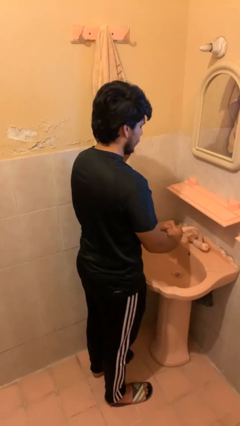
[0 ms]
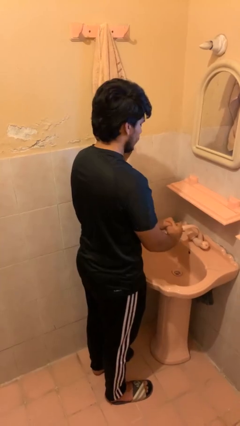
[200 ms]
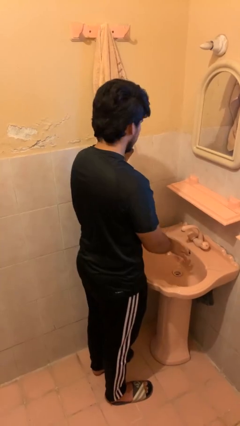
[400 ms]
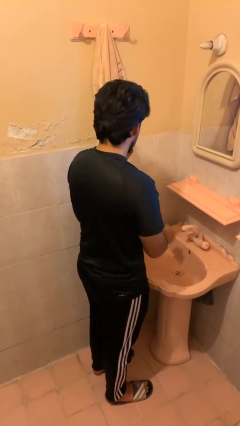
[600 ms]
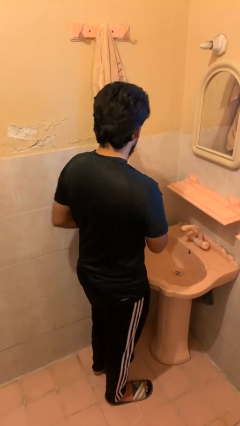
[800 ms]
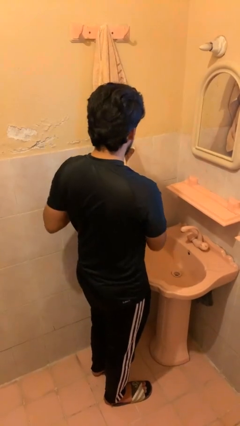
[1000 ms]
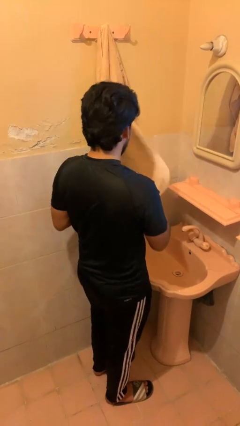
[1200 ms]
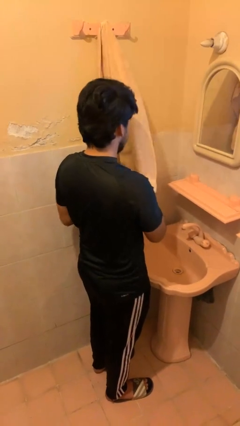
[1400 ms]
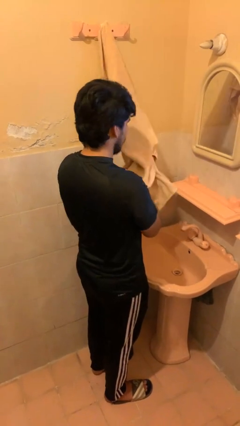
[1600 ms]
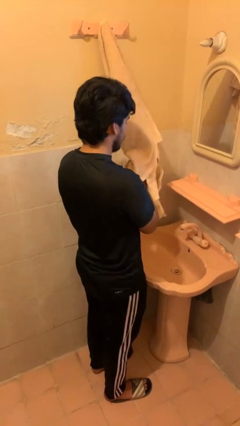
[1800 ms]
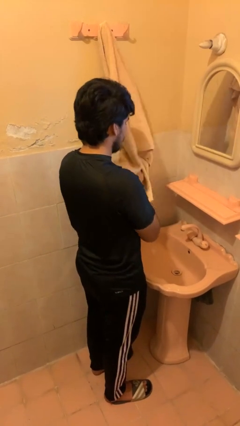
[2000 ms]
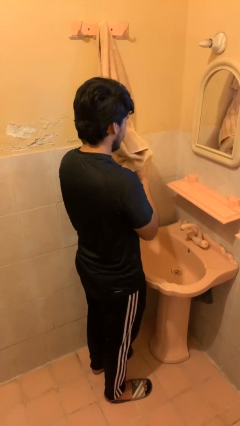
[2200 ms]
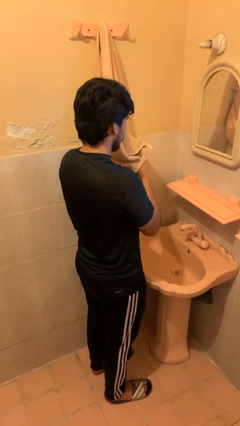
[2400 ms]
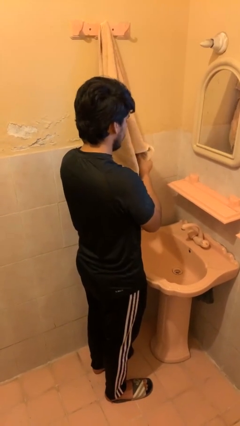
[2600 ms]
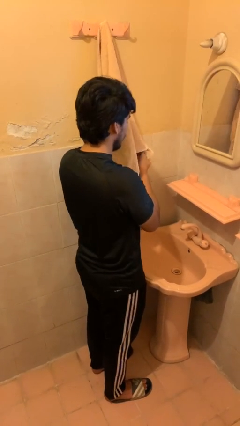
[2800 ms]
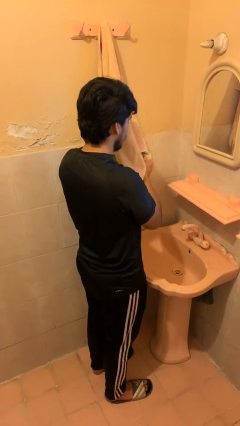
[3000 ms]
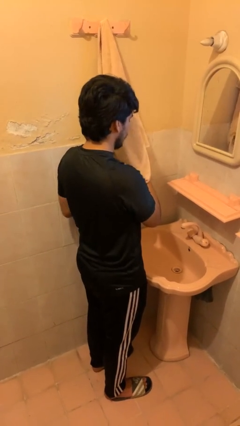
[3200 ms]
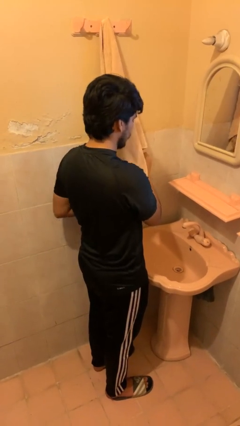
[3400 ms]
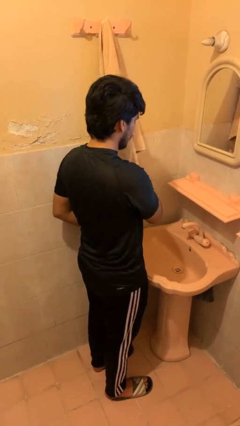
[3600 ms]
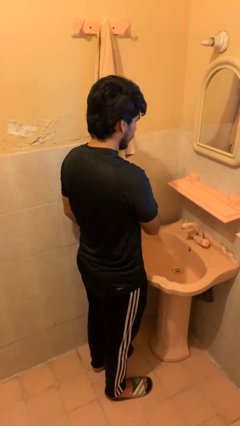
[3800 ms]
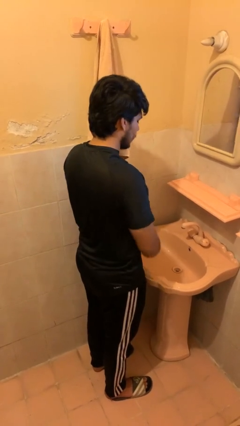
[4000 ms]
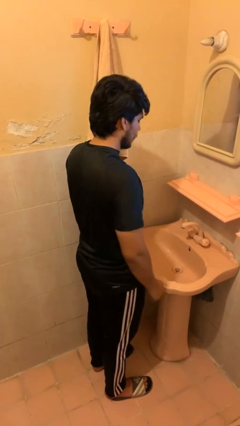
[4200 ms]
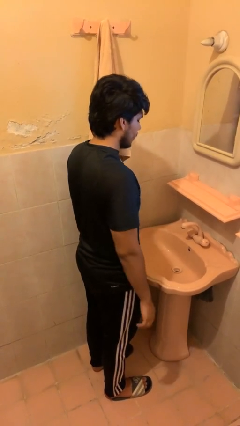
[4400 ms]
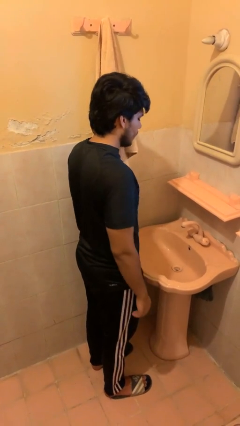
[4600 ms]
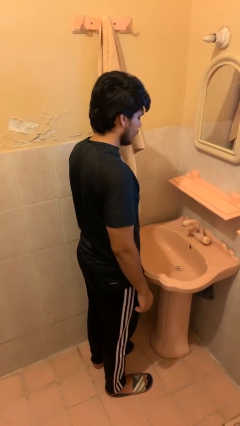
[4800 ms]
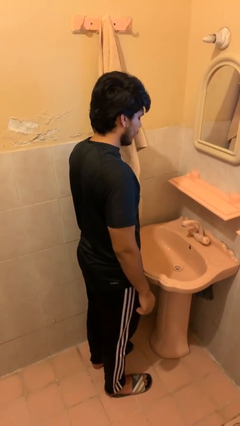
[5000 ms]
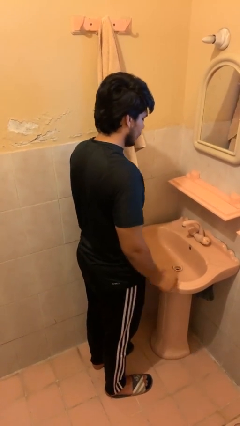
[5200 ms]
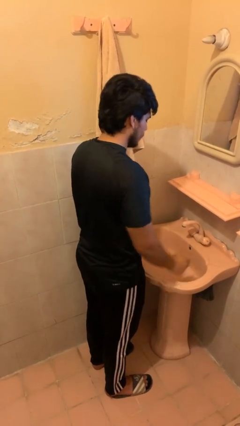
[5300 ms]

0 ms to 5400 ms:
person dries hands with towel

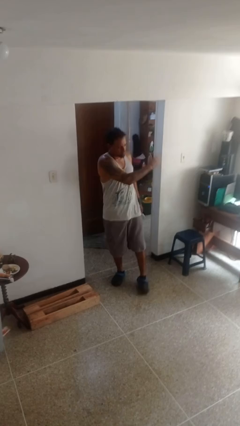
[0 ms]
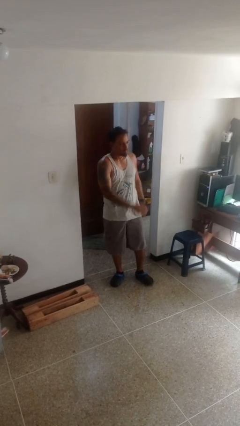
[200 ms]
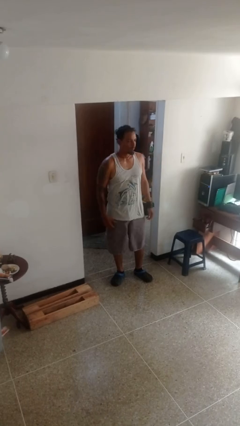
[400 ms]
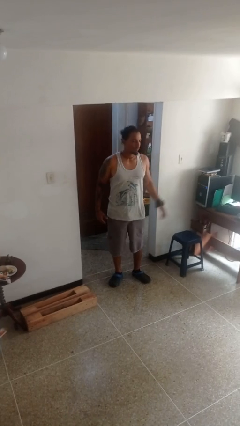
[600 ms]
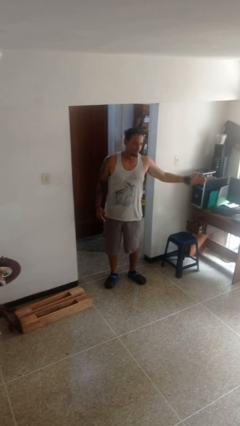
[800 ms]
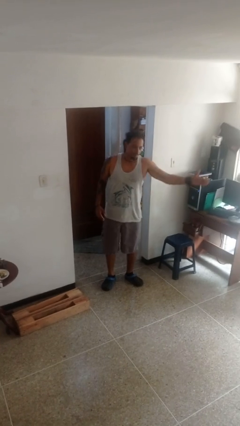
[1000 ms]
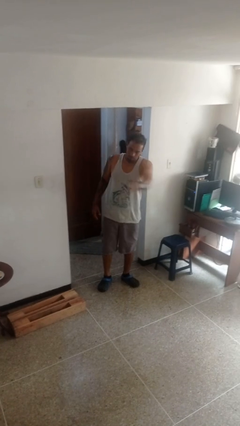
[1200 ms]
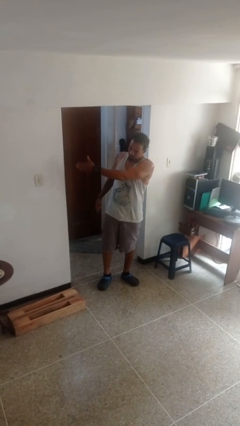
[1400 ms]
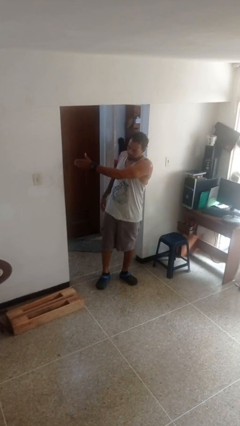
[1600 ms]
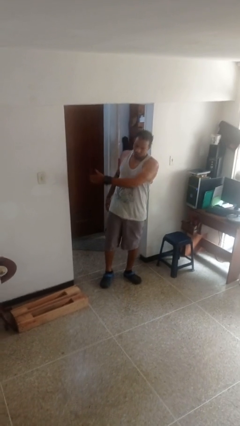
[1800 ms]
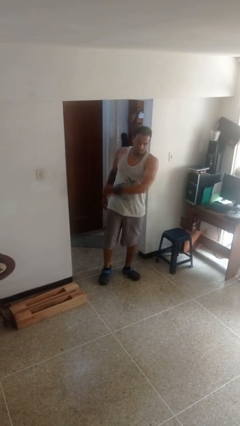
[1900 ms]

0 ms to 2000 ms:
person gestures swipe right

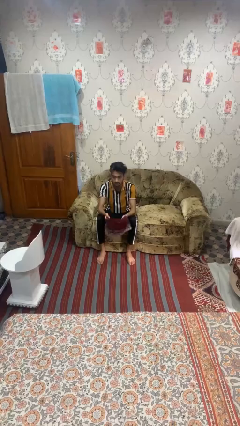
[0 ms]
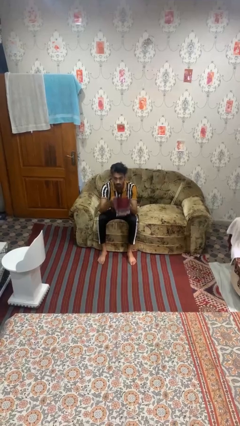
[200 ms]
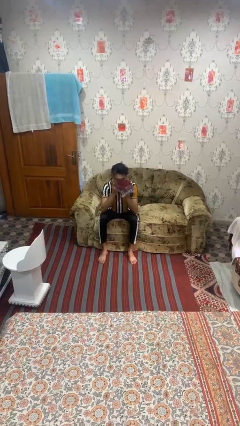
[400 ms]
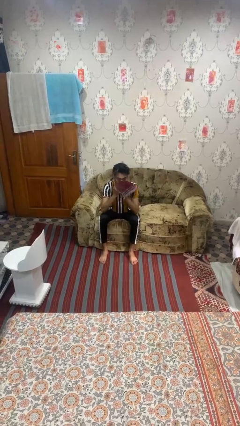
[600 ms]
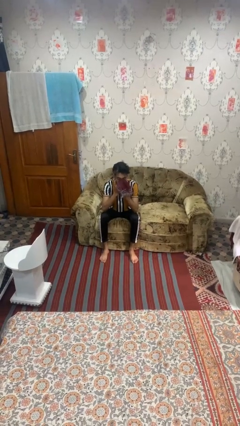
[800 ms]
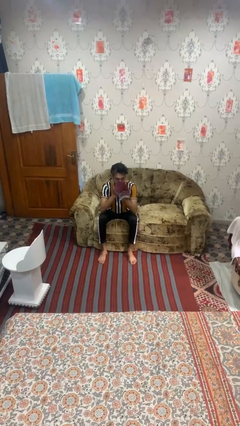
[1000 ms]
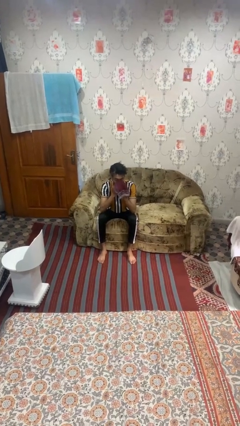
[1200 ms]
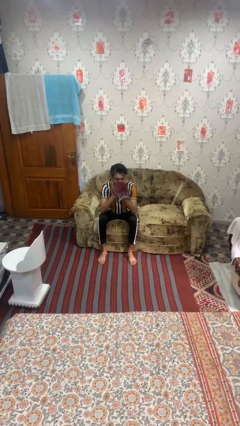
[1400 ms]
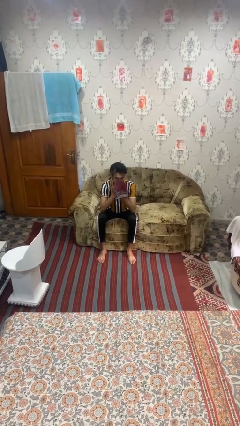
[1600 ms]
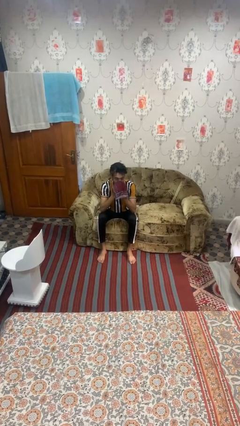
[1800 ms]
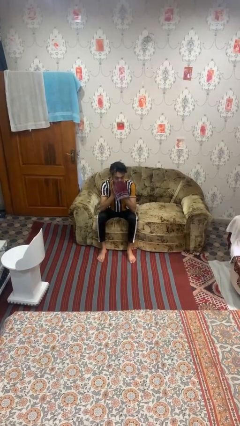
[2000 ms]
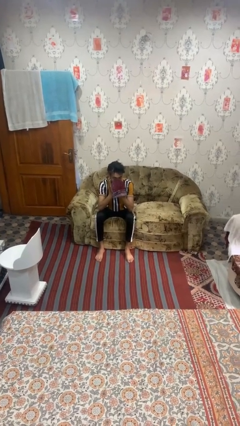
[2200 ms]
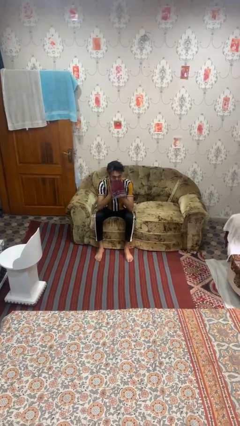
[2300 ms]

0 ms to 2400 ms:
person blows nose

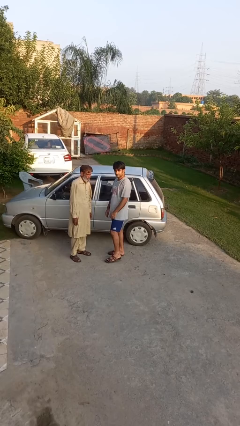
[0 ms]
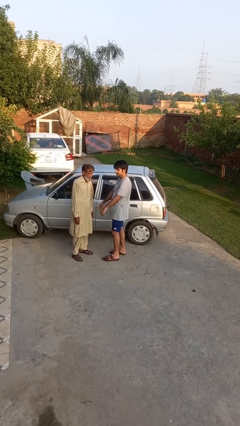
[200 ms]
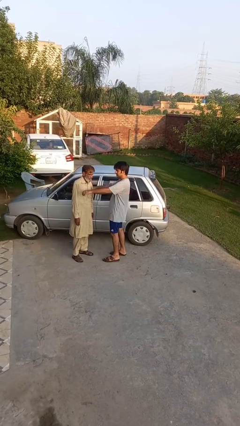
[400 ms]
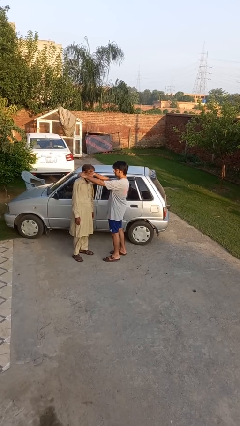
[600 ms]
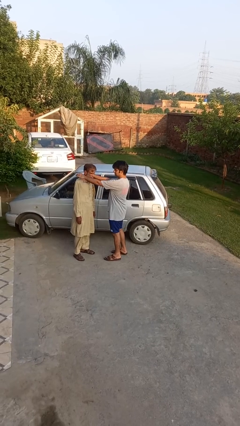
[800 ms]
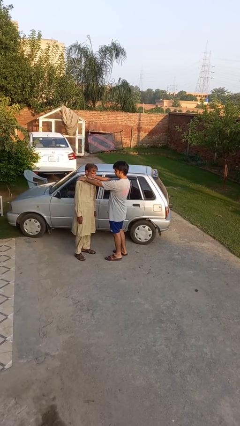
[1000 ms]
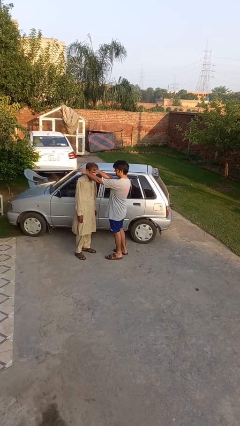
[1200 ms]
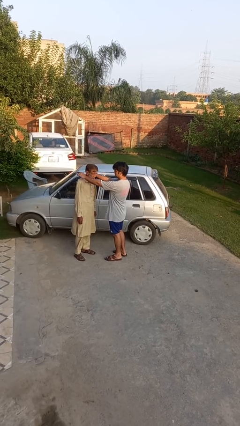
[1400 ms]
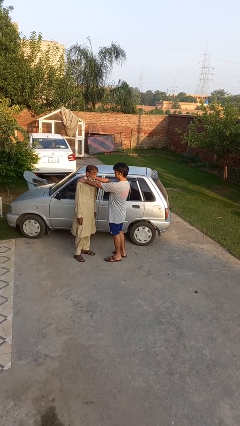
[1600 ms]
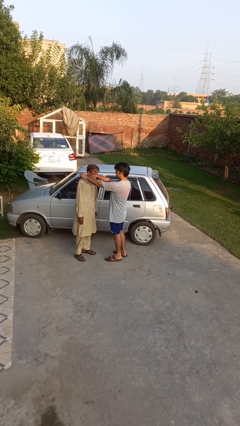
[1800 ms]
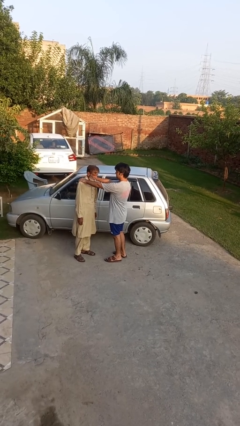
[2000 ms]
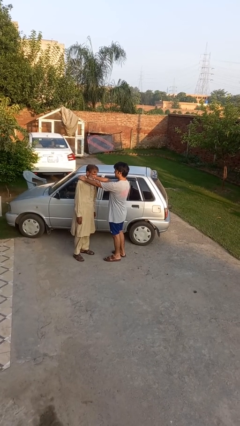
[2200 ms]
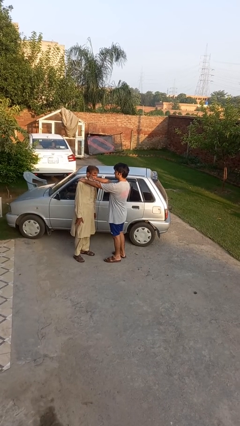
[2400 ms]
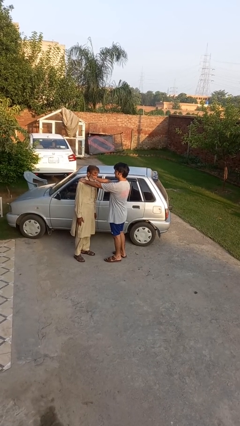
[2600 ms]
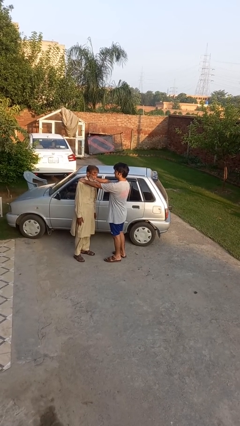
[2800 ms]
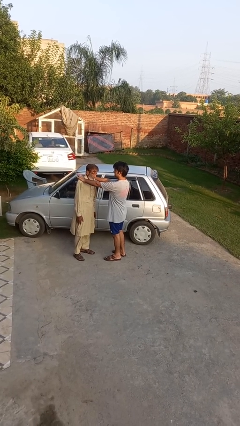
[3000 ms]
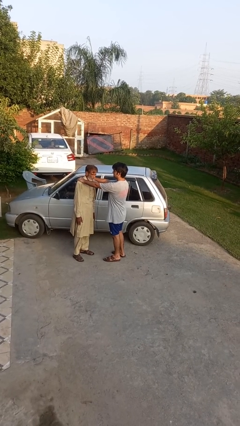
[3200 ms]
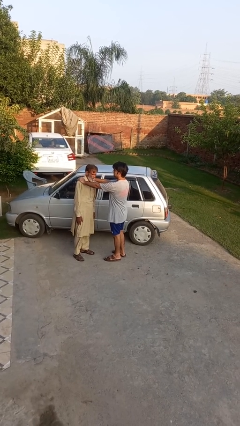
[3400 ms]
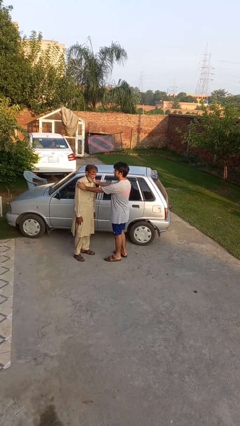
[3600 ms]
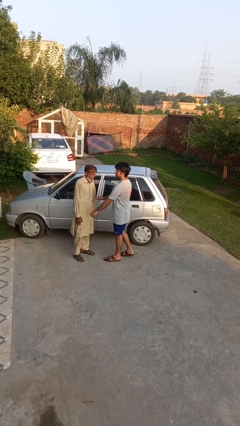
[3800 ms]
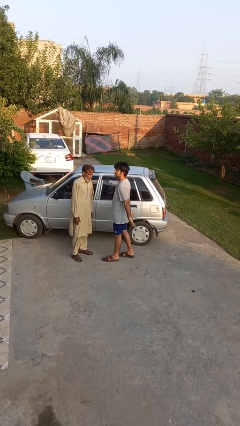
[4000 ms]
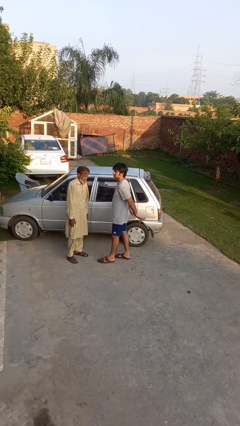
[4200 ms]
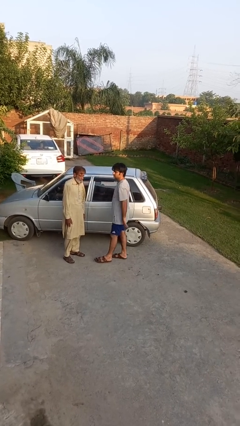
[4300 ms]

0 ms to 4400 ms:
person pounds shoulders of person

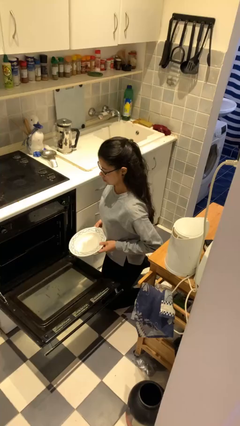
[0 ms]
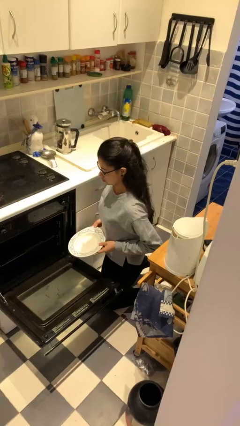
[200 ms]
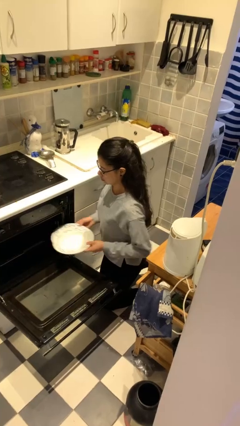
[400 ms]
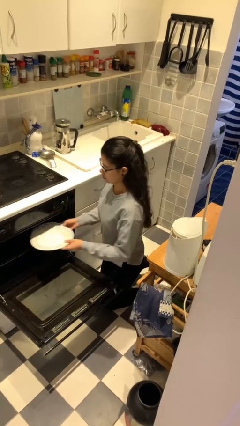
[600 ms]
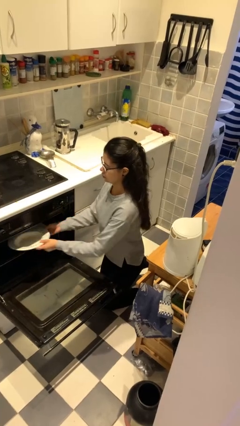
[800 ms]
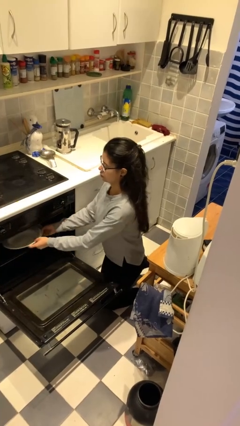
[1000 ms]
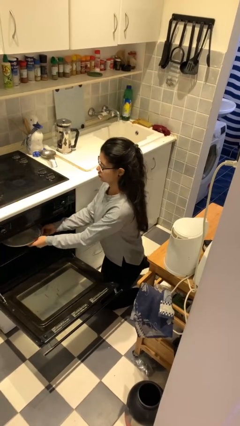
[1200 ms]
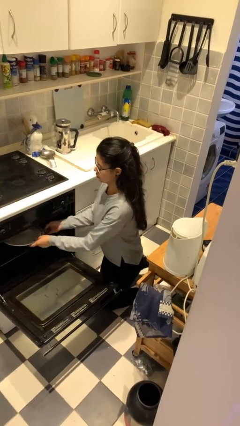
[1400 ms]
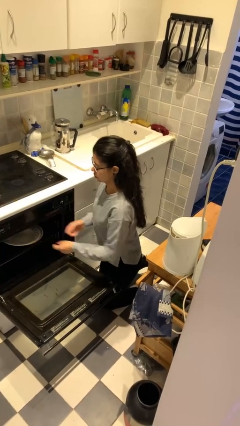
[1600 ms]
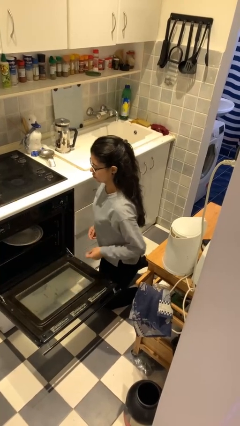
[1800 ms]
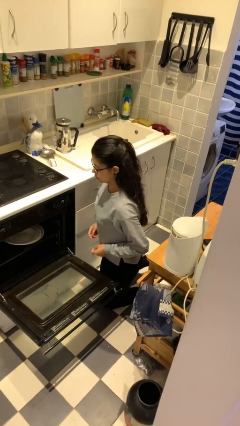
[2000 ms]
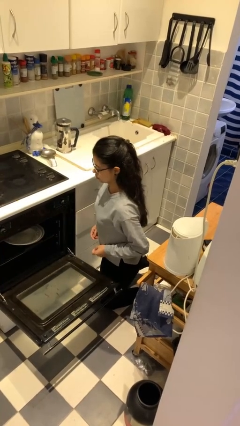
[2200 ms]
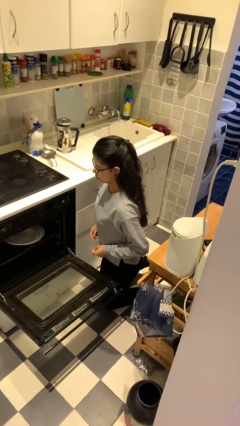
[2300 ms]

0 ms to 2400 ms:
person loads dishwasher

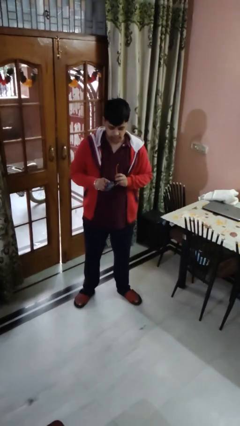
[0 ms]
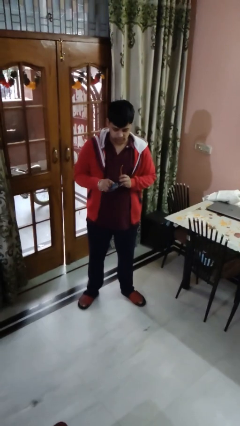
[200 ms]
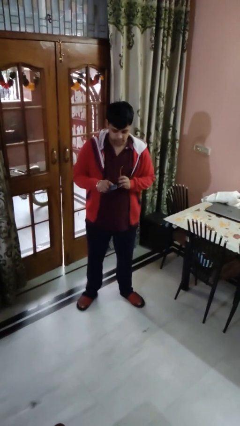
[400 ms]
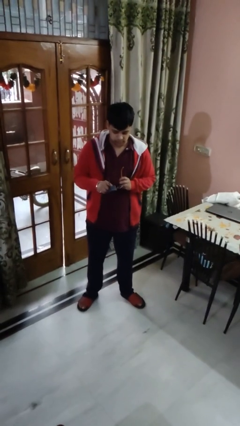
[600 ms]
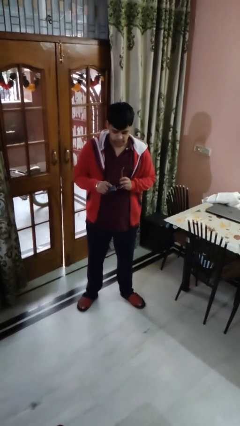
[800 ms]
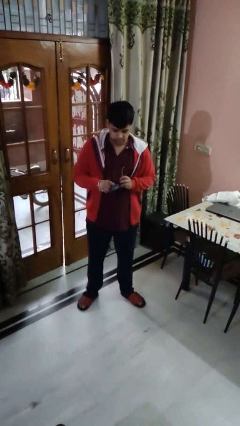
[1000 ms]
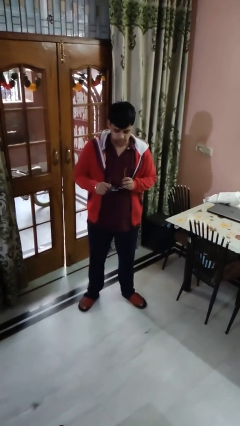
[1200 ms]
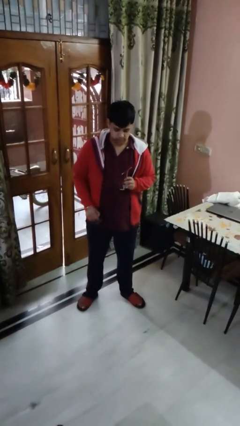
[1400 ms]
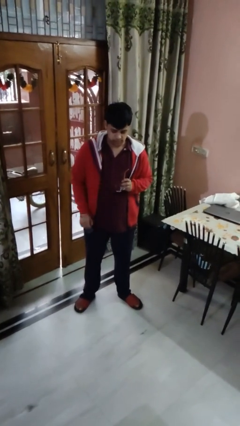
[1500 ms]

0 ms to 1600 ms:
person cleans eyeglasses
